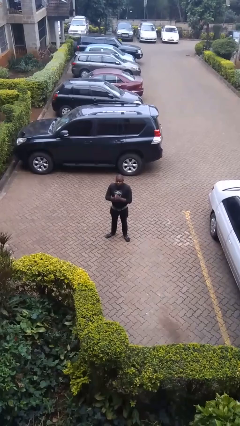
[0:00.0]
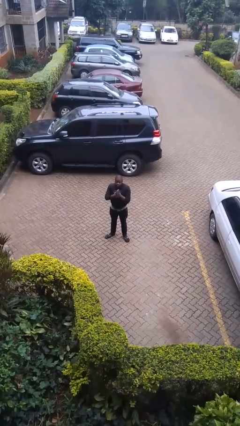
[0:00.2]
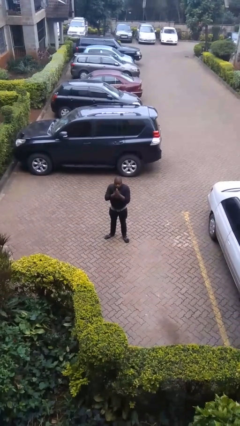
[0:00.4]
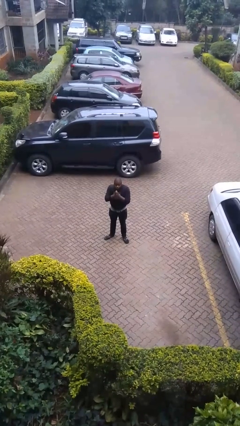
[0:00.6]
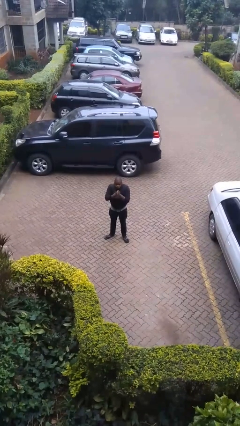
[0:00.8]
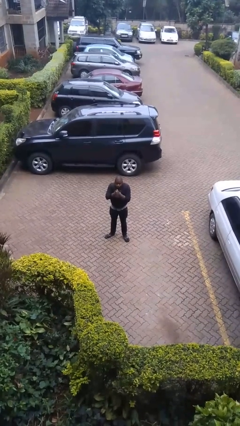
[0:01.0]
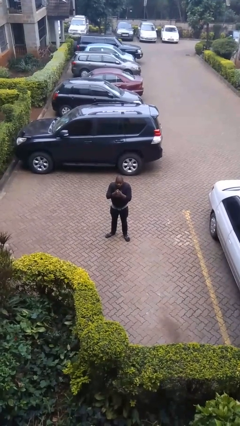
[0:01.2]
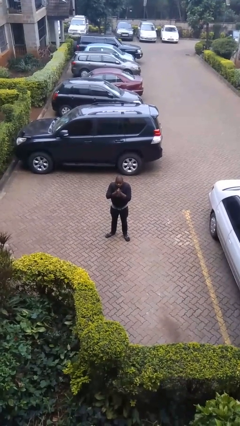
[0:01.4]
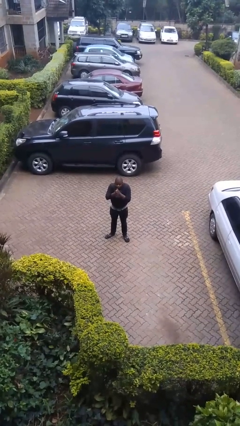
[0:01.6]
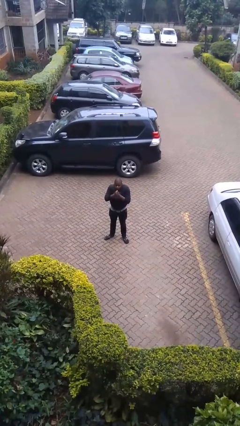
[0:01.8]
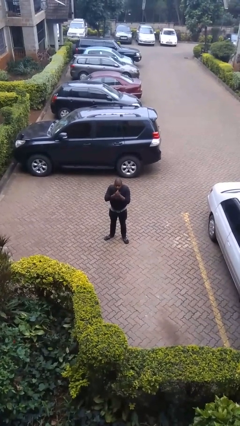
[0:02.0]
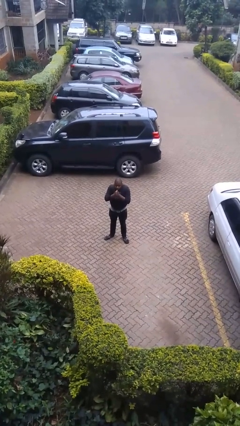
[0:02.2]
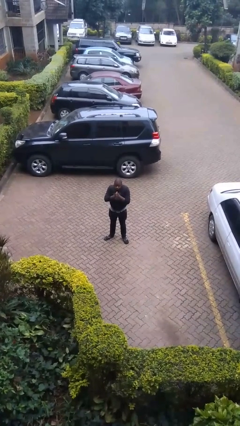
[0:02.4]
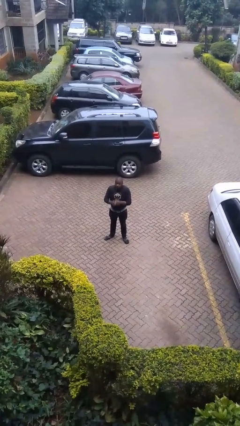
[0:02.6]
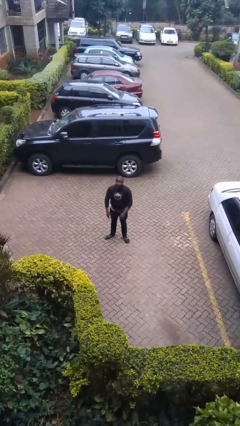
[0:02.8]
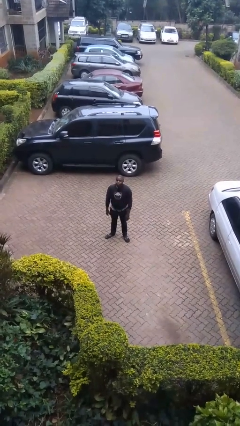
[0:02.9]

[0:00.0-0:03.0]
person blows into hands

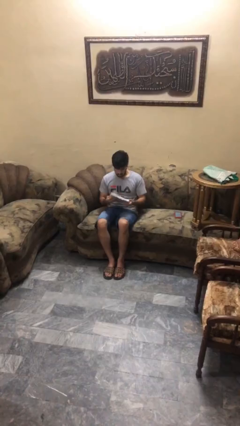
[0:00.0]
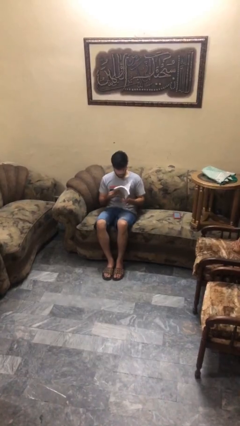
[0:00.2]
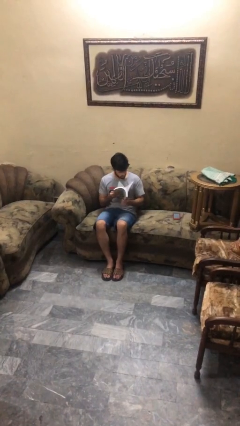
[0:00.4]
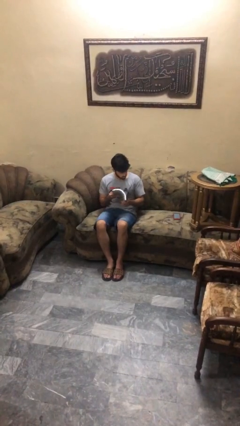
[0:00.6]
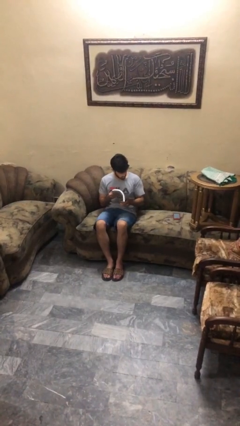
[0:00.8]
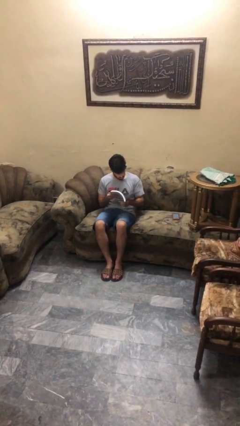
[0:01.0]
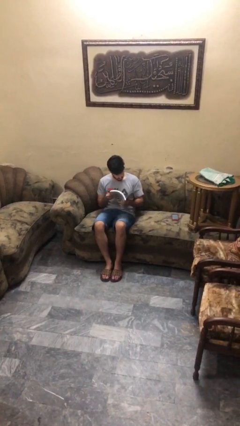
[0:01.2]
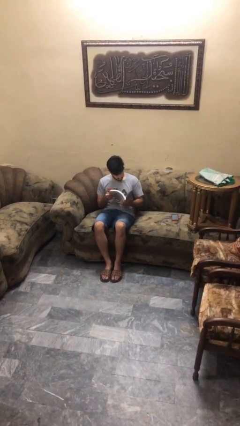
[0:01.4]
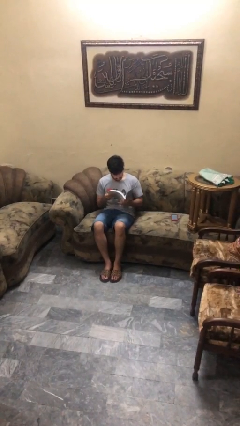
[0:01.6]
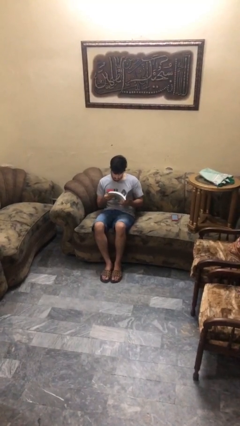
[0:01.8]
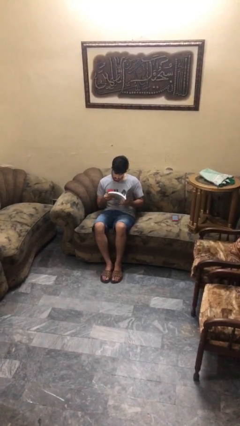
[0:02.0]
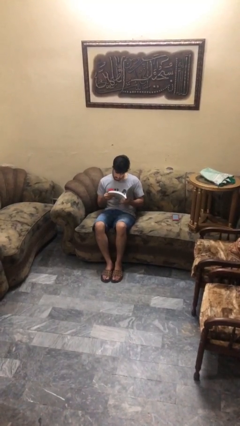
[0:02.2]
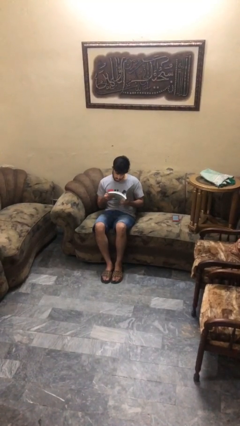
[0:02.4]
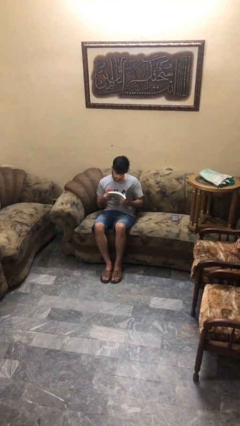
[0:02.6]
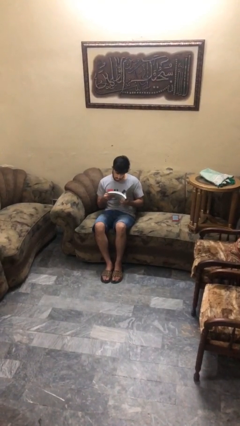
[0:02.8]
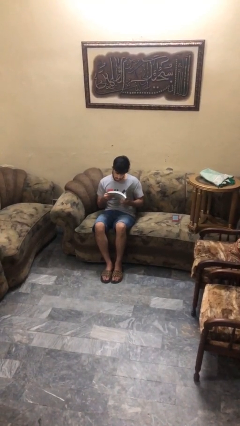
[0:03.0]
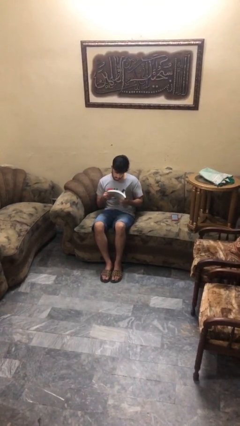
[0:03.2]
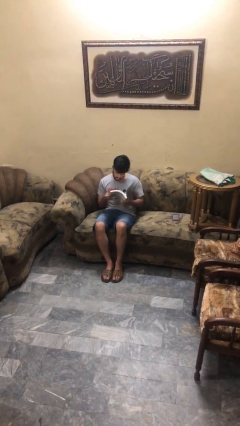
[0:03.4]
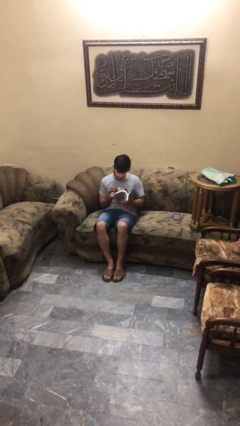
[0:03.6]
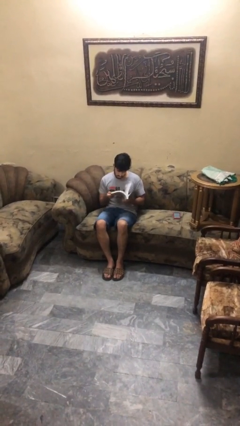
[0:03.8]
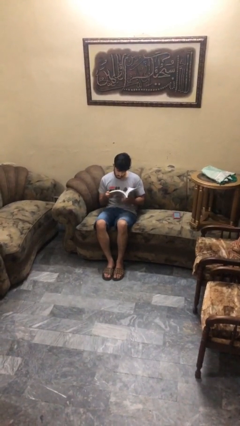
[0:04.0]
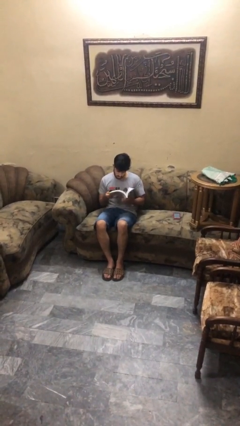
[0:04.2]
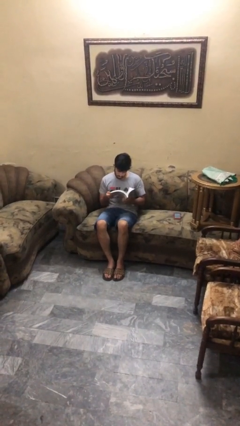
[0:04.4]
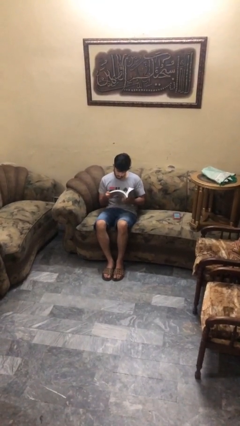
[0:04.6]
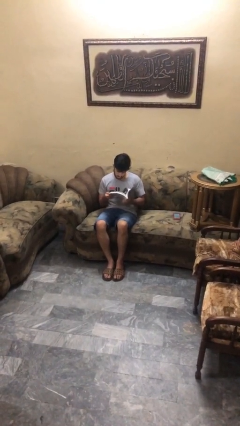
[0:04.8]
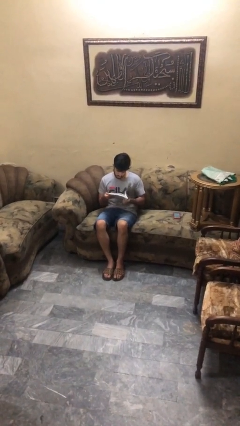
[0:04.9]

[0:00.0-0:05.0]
person reads book

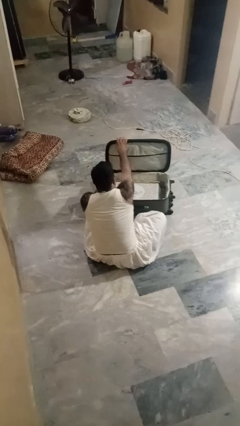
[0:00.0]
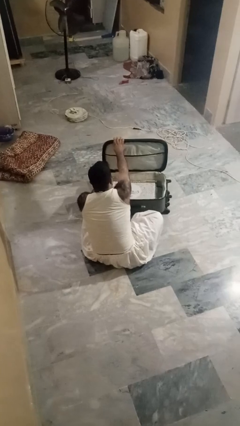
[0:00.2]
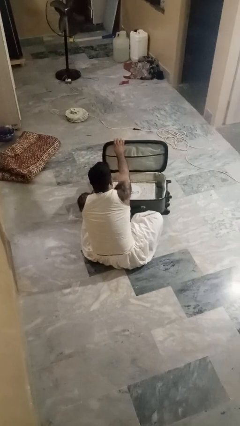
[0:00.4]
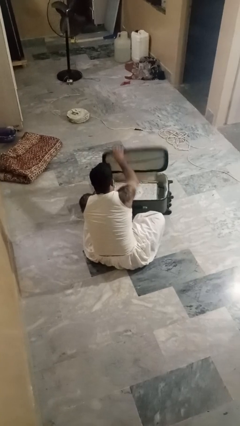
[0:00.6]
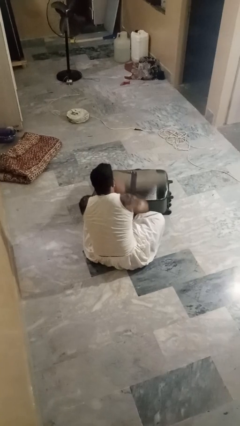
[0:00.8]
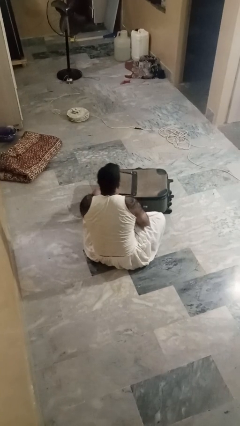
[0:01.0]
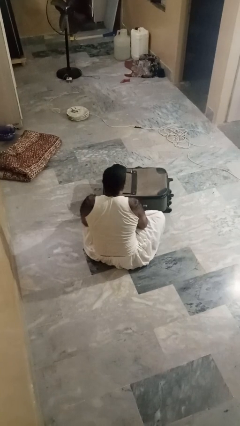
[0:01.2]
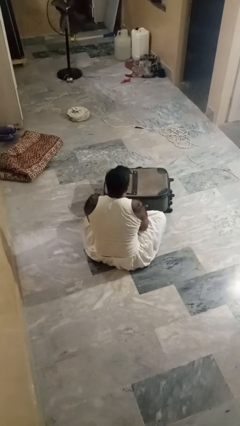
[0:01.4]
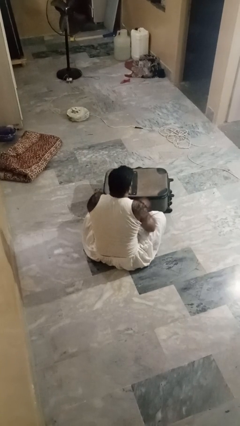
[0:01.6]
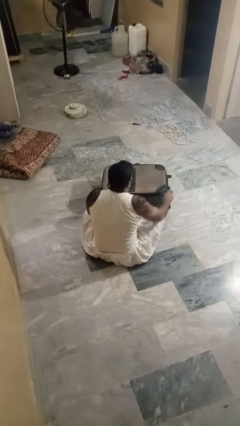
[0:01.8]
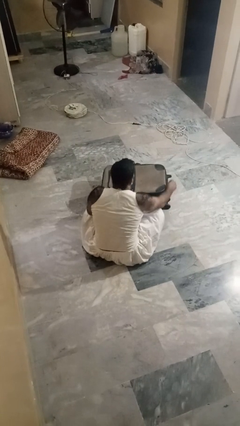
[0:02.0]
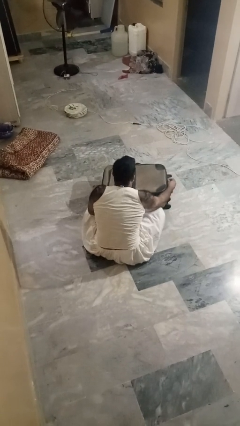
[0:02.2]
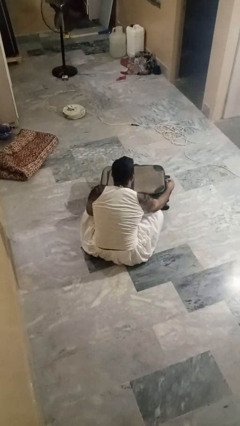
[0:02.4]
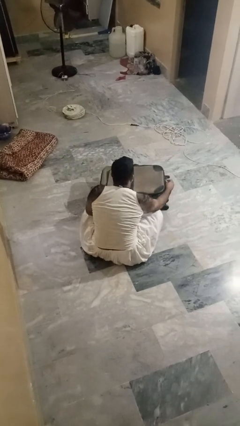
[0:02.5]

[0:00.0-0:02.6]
person closes suitcase

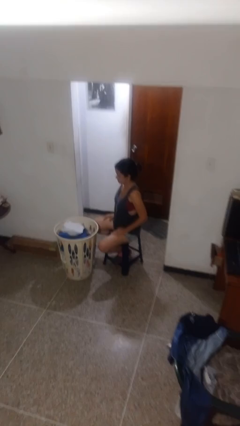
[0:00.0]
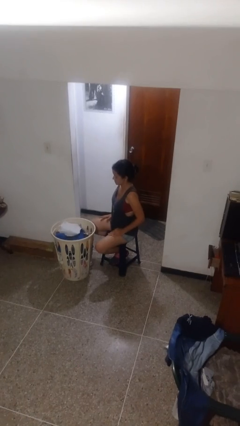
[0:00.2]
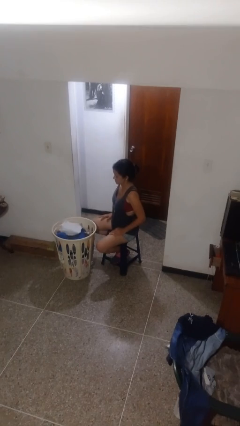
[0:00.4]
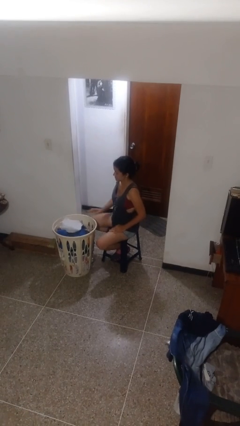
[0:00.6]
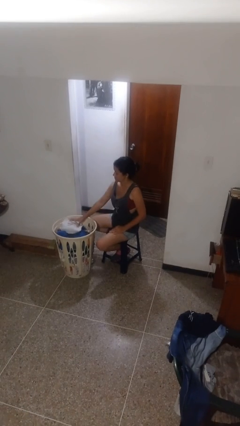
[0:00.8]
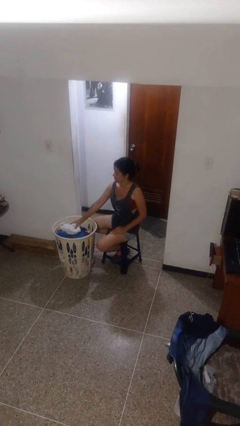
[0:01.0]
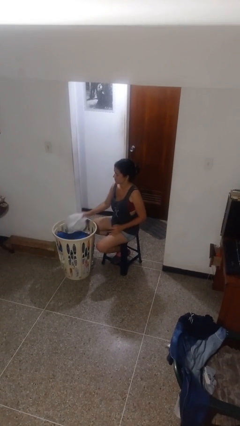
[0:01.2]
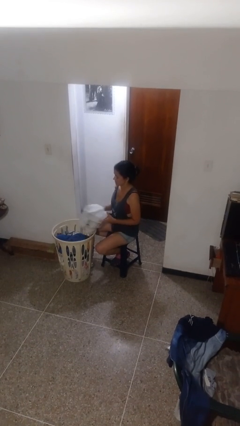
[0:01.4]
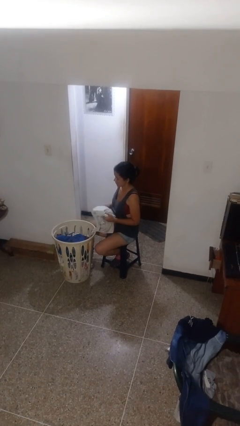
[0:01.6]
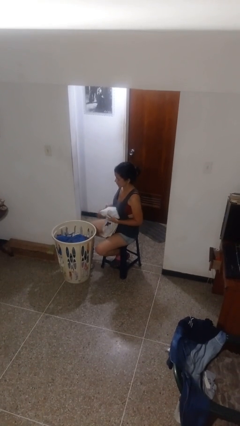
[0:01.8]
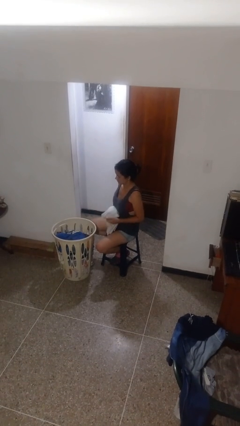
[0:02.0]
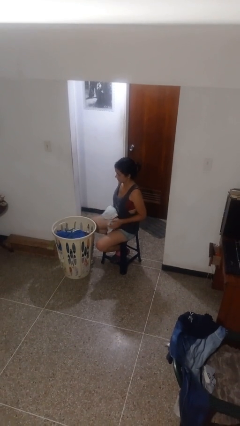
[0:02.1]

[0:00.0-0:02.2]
person takes object from basket

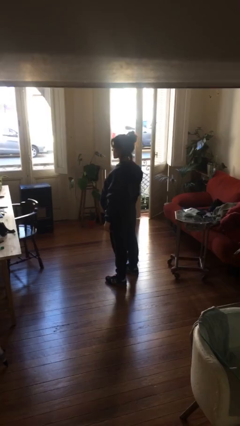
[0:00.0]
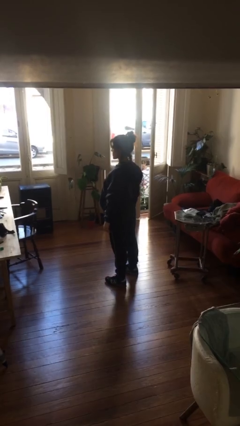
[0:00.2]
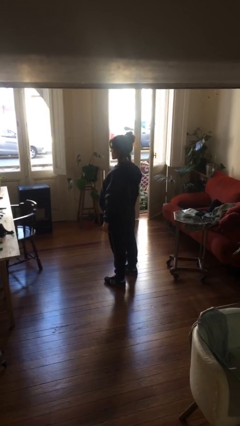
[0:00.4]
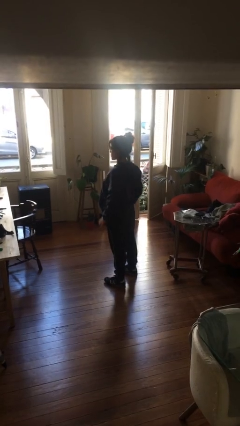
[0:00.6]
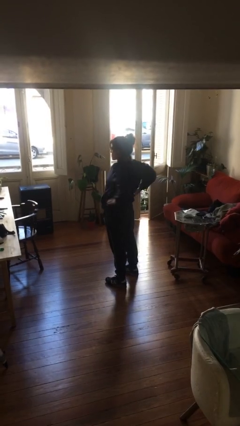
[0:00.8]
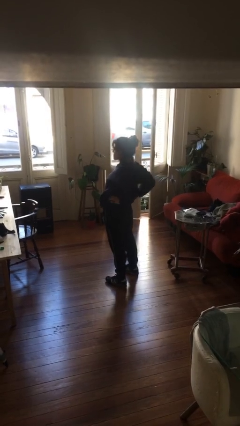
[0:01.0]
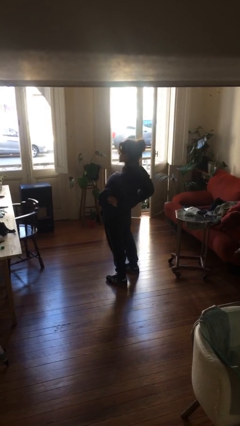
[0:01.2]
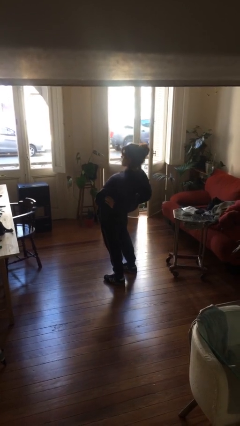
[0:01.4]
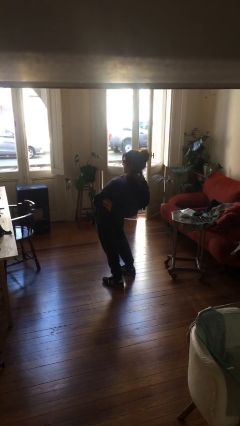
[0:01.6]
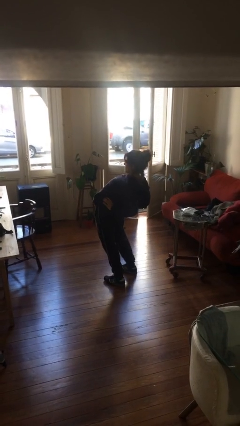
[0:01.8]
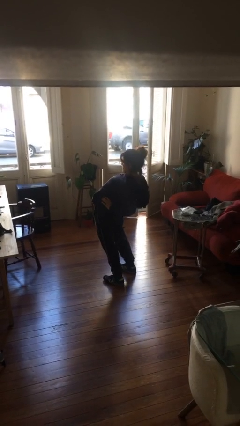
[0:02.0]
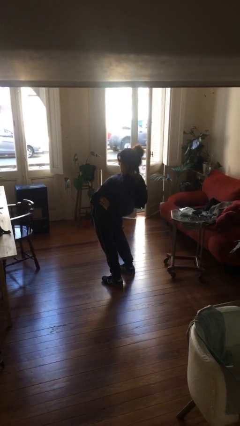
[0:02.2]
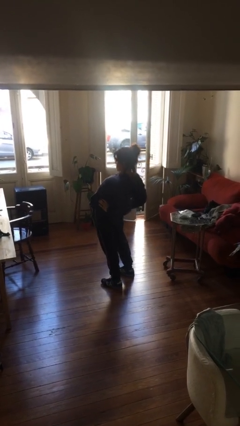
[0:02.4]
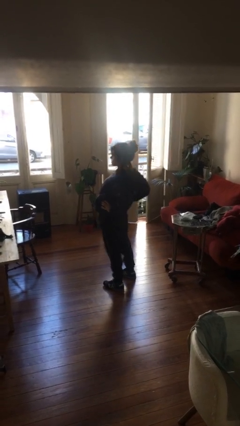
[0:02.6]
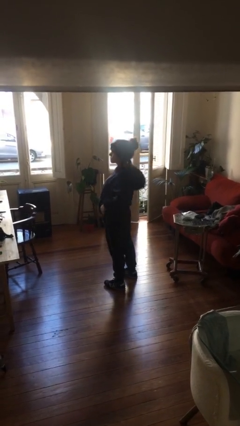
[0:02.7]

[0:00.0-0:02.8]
person stretches back

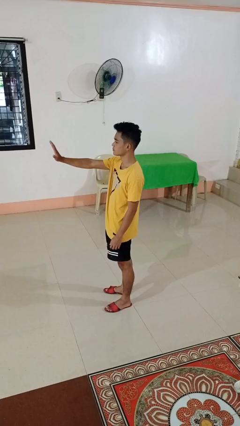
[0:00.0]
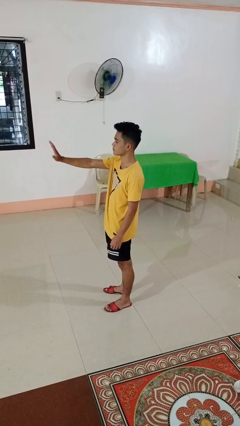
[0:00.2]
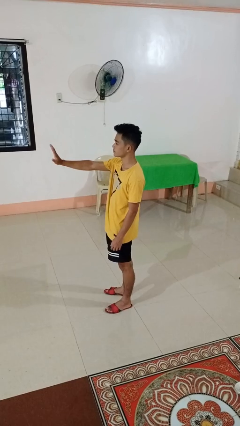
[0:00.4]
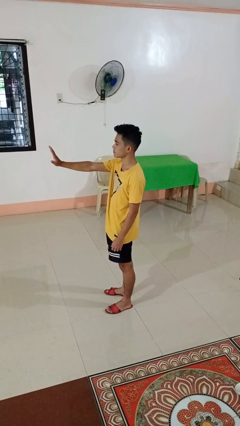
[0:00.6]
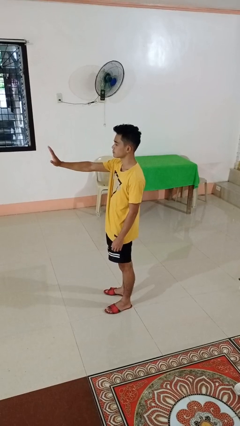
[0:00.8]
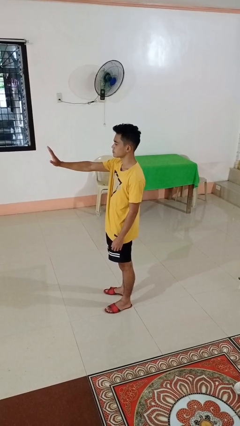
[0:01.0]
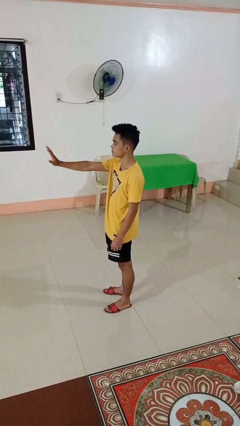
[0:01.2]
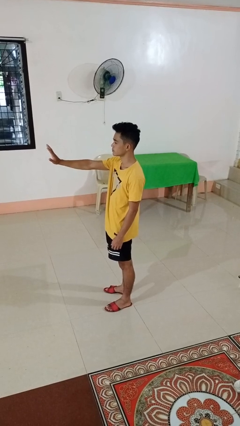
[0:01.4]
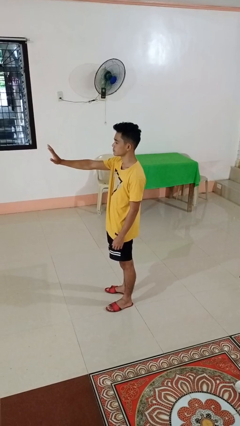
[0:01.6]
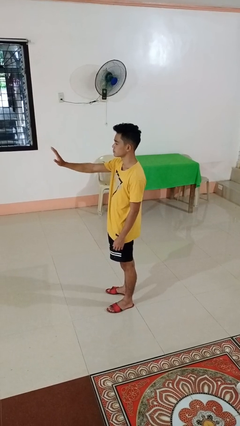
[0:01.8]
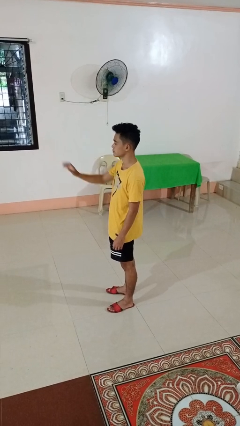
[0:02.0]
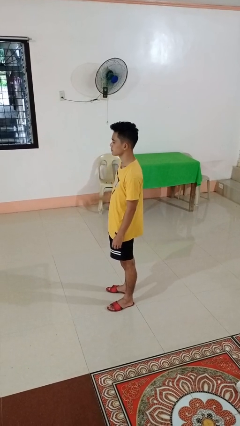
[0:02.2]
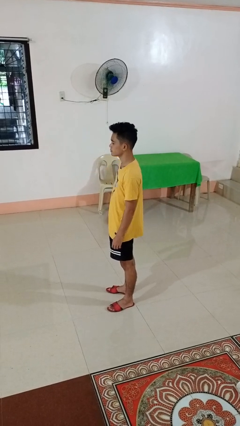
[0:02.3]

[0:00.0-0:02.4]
person gestures stop
